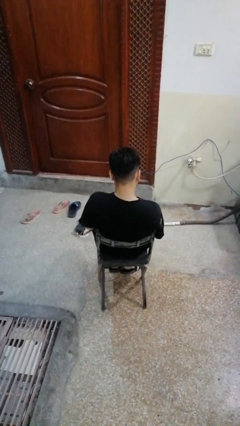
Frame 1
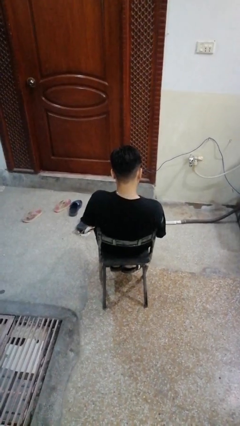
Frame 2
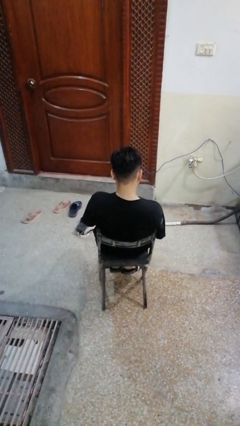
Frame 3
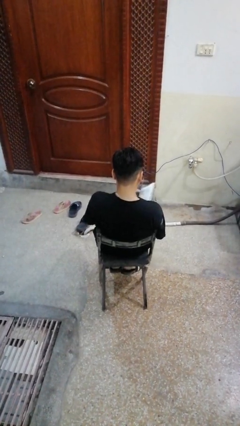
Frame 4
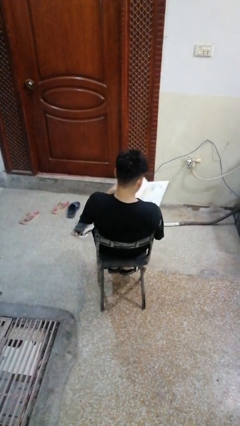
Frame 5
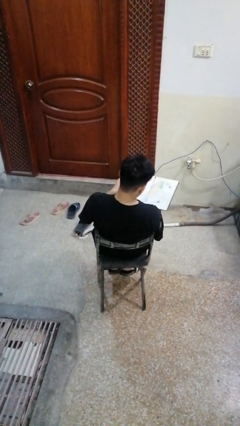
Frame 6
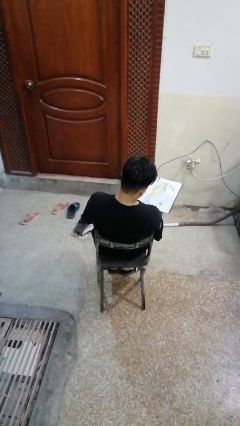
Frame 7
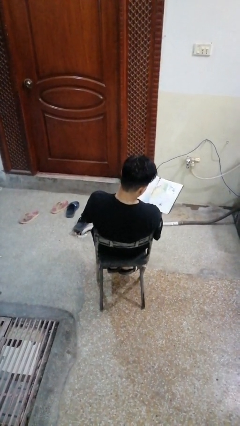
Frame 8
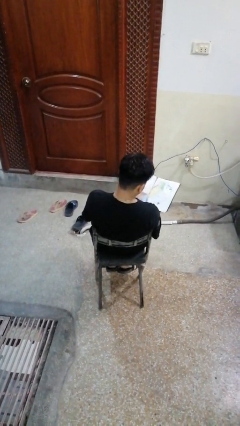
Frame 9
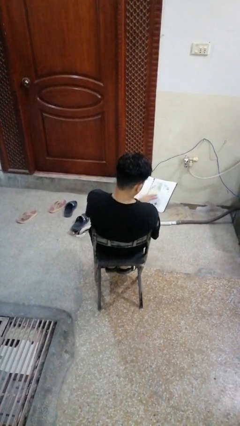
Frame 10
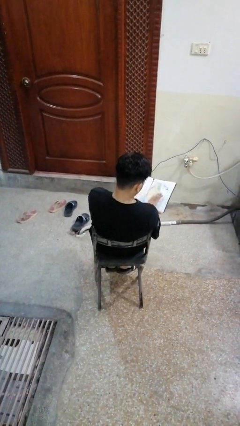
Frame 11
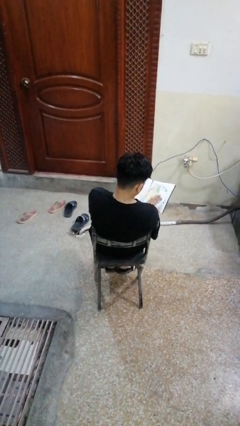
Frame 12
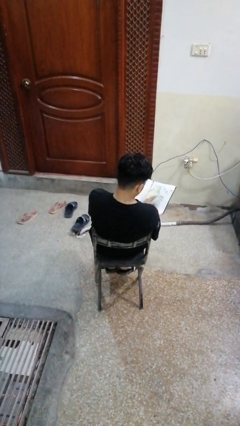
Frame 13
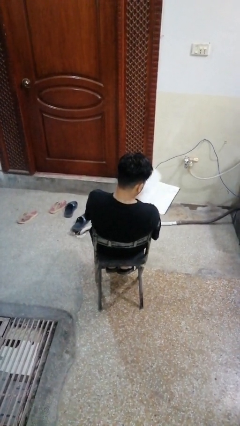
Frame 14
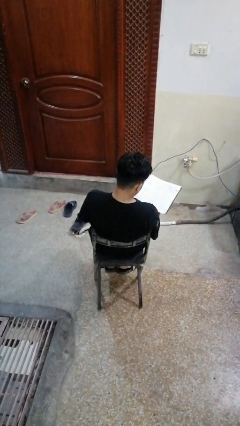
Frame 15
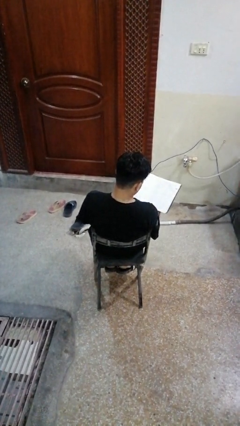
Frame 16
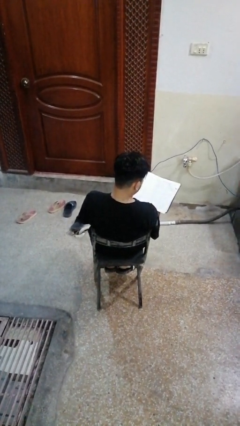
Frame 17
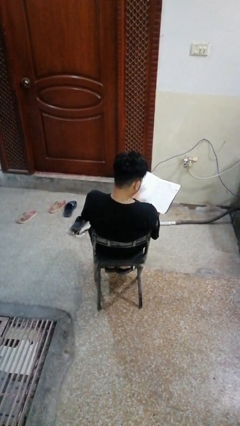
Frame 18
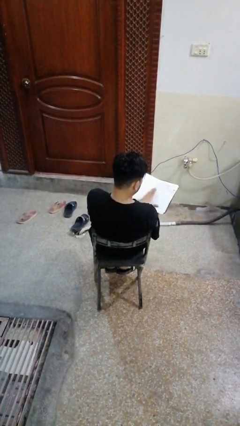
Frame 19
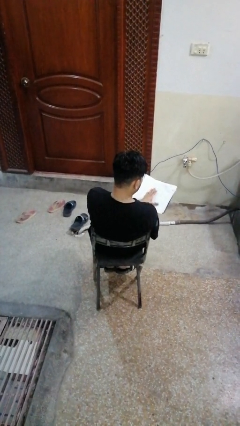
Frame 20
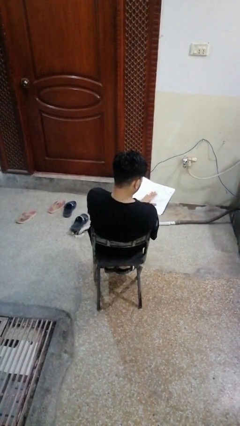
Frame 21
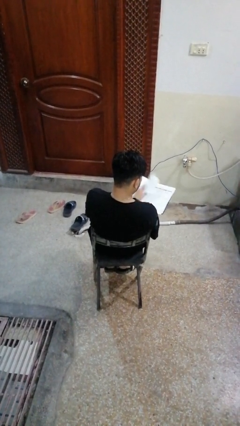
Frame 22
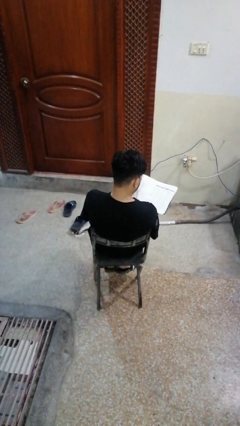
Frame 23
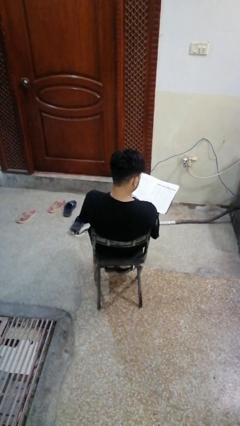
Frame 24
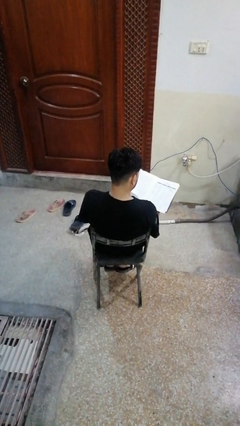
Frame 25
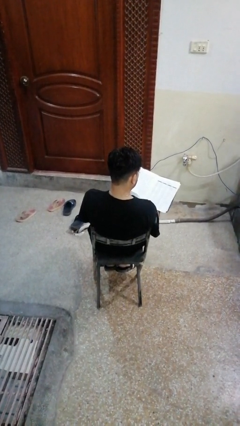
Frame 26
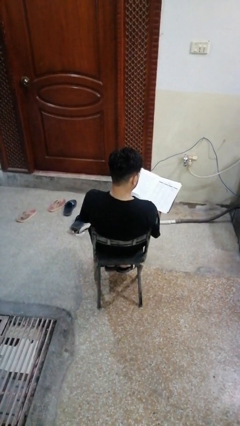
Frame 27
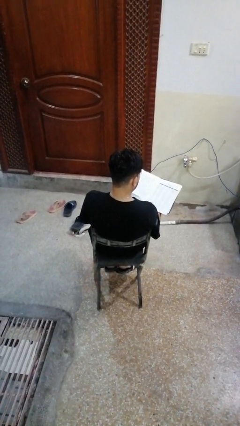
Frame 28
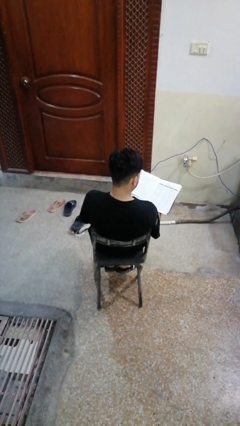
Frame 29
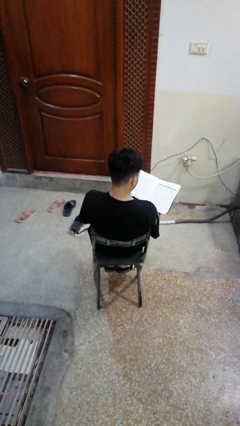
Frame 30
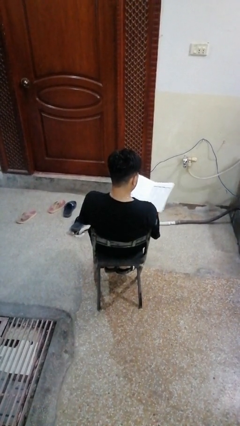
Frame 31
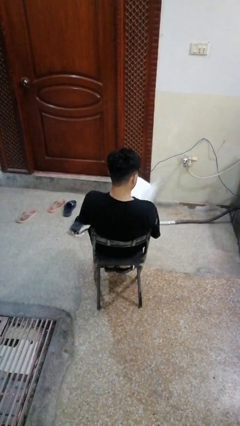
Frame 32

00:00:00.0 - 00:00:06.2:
person reads book

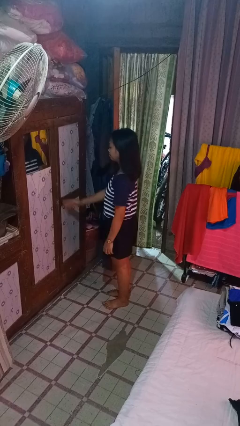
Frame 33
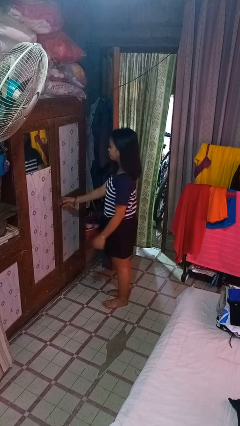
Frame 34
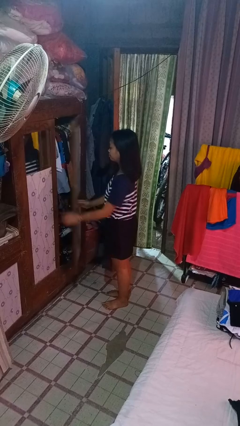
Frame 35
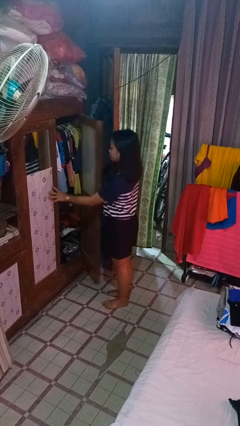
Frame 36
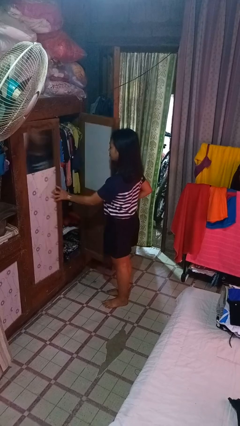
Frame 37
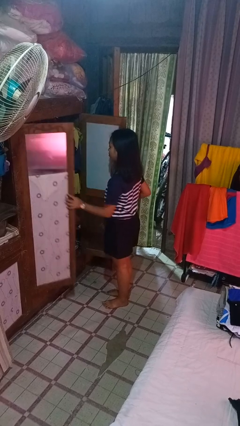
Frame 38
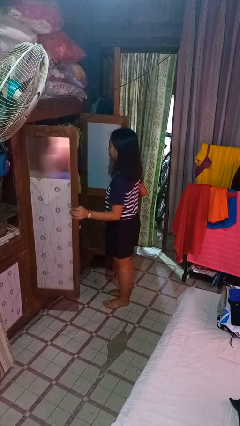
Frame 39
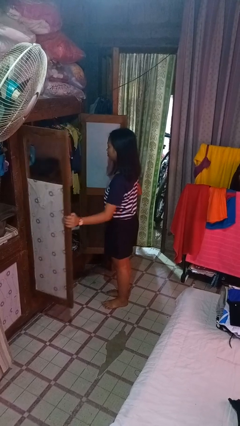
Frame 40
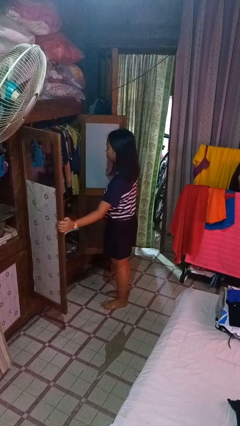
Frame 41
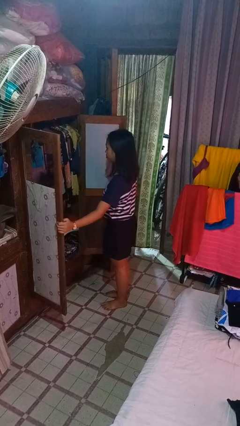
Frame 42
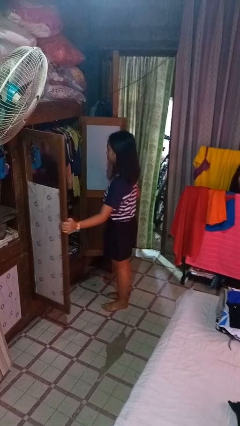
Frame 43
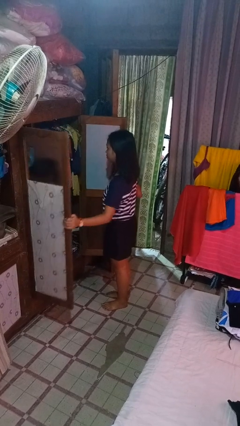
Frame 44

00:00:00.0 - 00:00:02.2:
person opens closet door

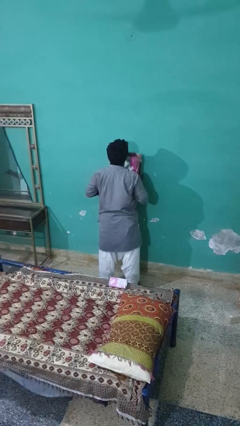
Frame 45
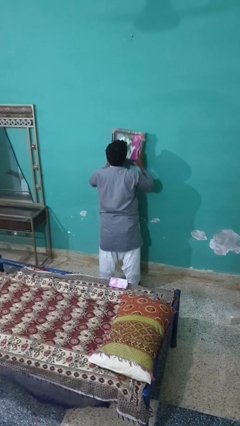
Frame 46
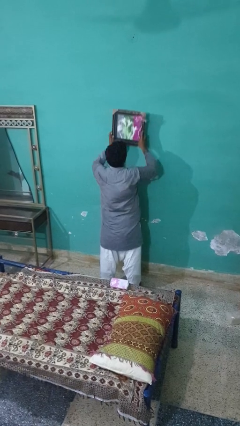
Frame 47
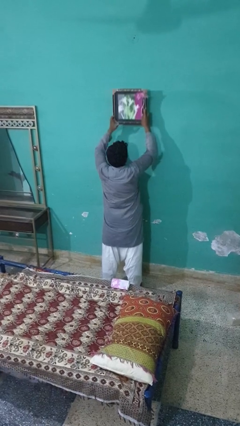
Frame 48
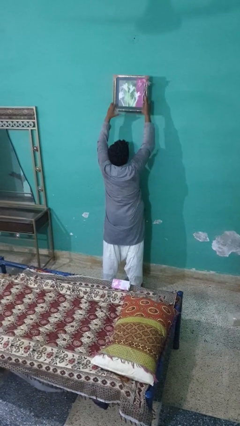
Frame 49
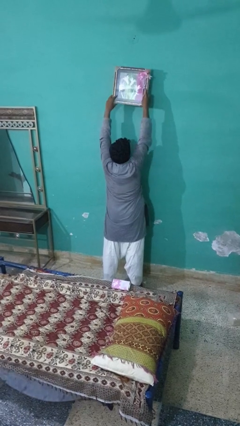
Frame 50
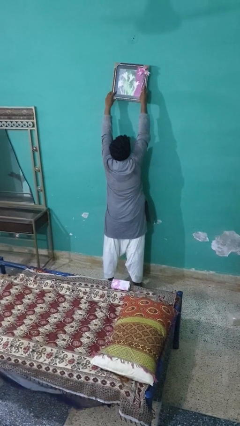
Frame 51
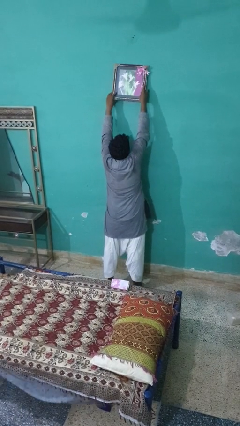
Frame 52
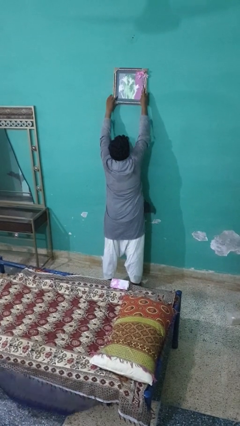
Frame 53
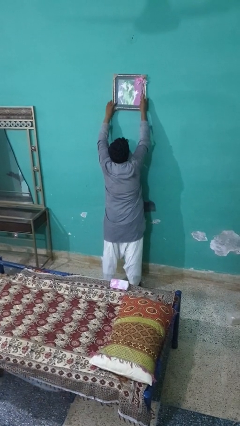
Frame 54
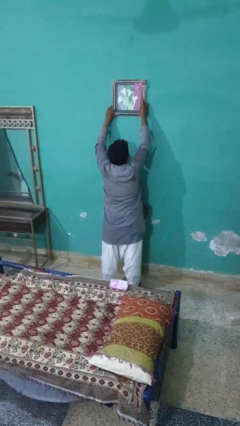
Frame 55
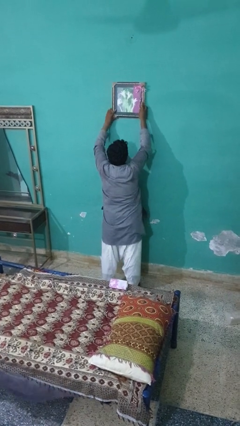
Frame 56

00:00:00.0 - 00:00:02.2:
person puts up picture frame

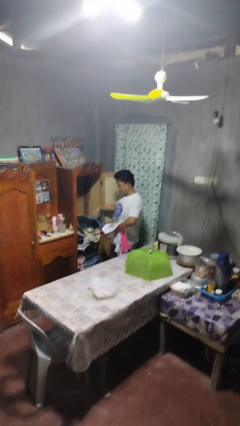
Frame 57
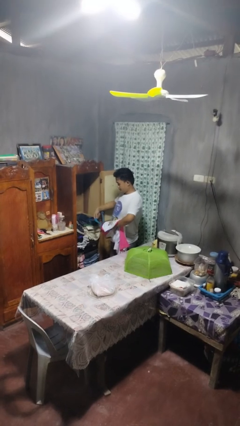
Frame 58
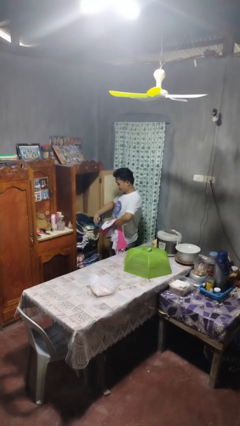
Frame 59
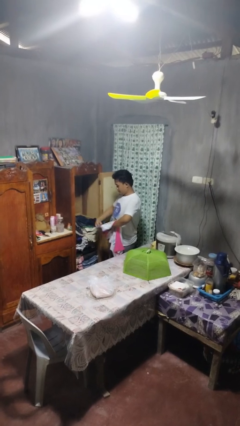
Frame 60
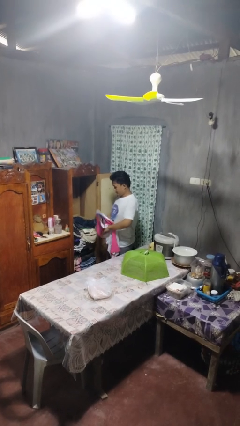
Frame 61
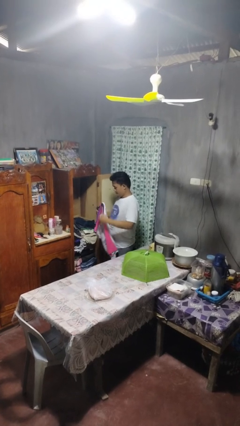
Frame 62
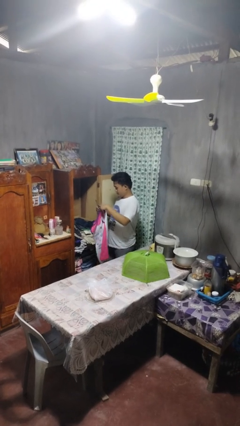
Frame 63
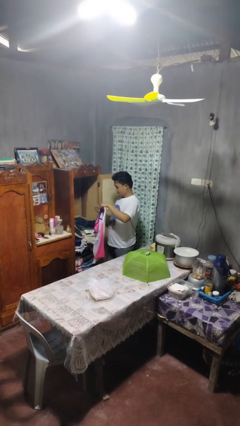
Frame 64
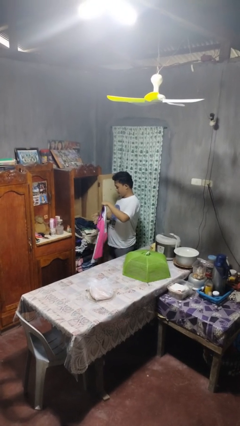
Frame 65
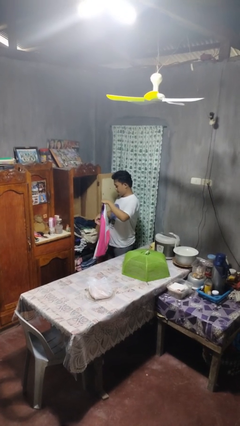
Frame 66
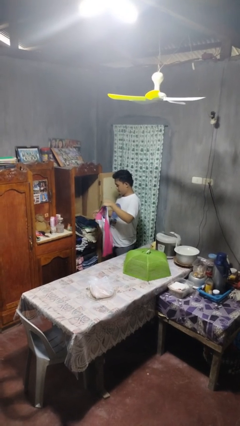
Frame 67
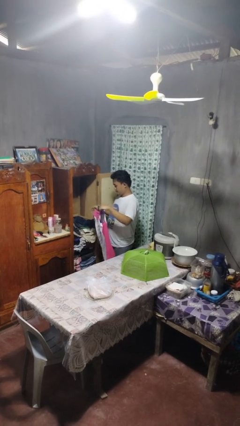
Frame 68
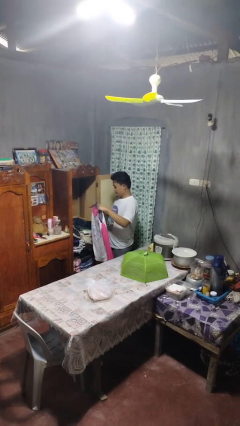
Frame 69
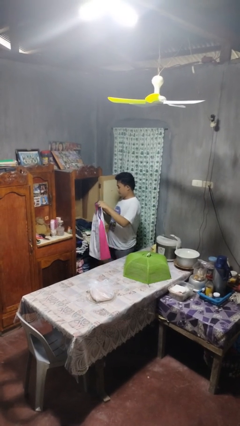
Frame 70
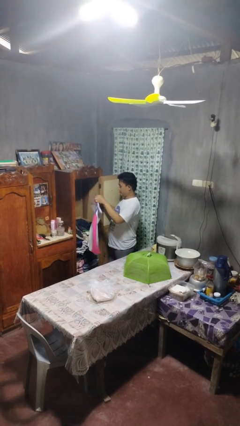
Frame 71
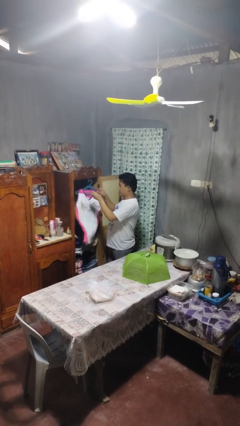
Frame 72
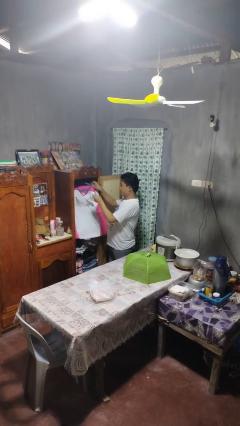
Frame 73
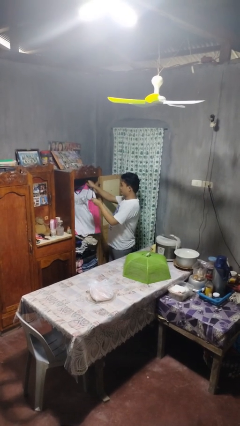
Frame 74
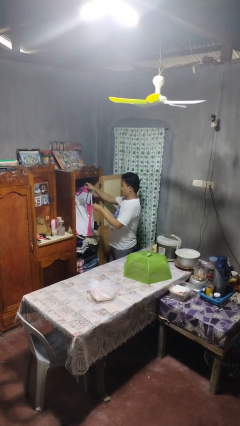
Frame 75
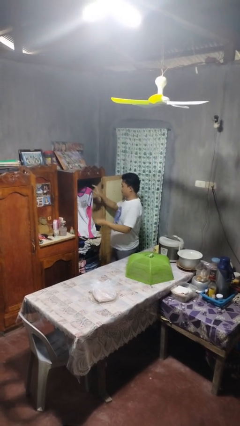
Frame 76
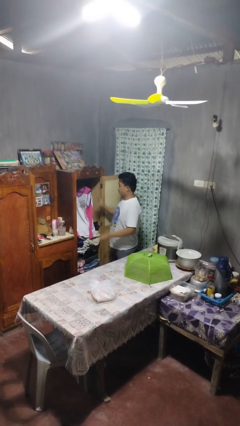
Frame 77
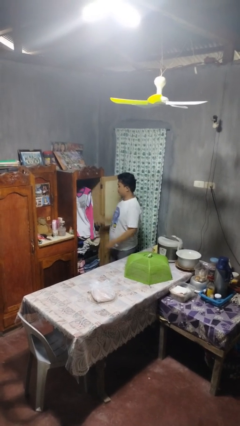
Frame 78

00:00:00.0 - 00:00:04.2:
person puts clothes into closet

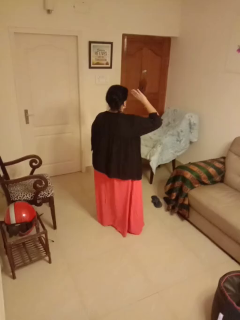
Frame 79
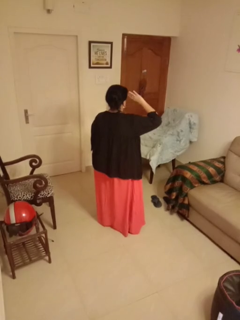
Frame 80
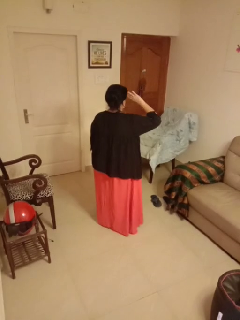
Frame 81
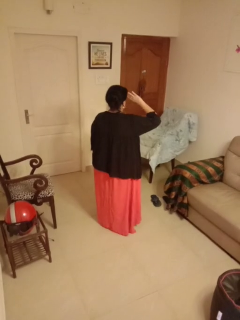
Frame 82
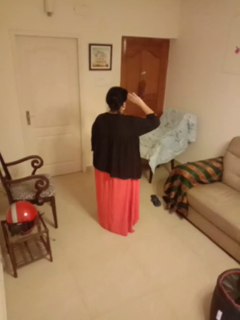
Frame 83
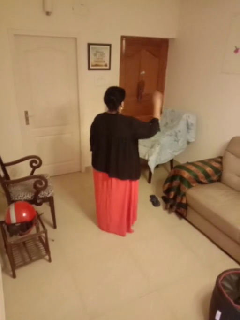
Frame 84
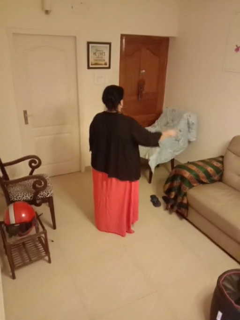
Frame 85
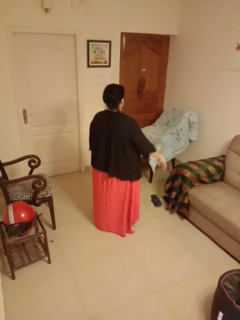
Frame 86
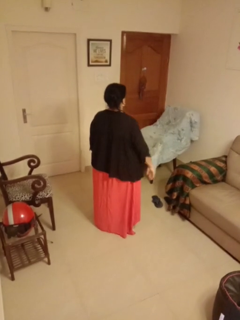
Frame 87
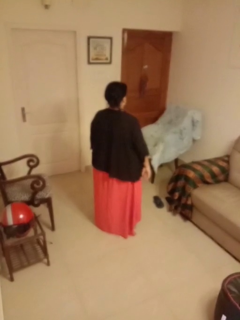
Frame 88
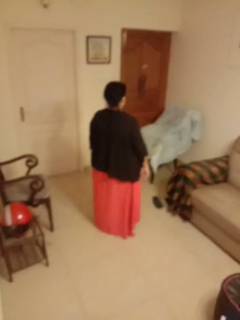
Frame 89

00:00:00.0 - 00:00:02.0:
person salutes

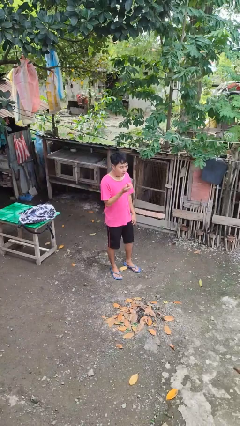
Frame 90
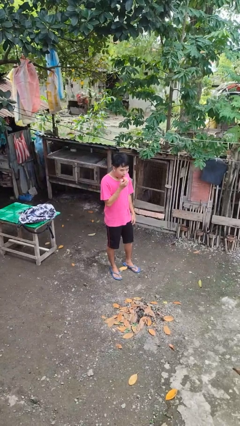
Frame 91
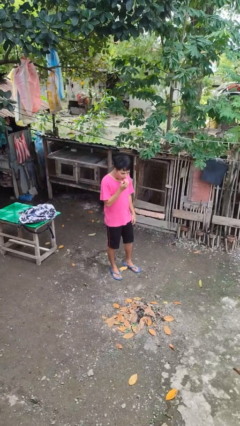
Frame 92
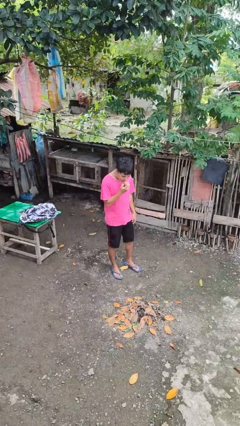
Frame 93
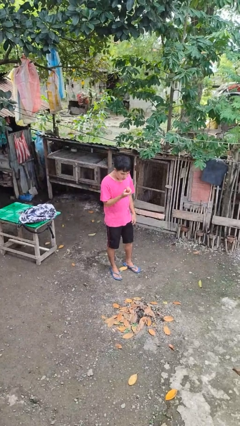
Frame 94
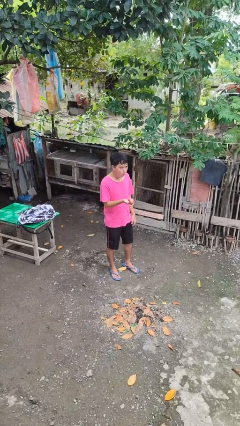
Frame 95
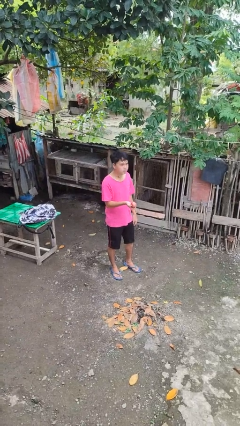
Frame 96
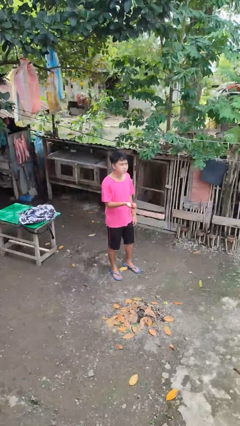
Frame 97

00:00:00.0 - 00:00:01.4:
person eats apple
